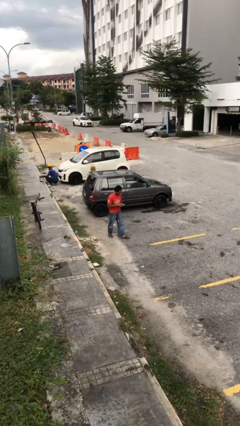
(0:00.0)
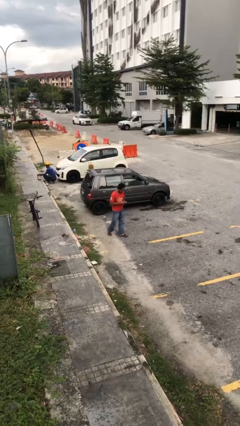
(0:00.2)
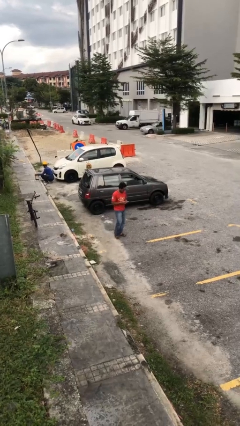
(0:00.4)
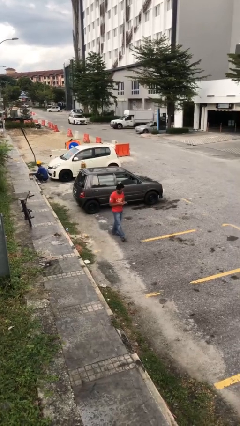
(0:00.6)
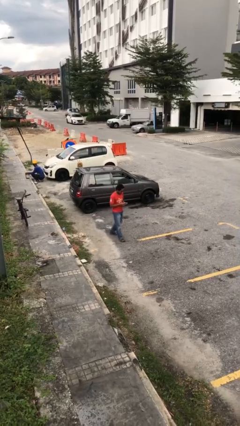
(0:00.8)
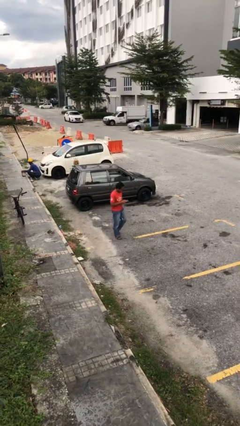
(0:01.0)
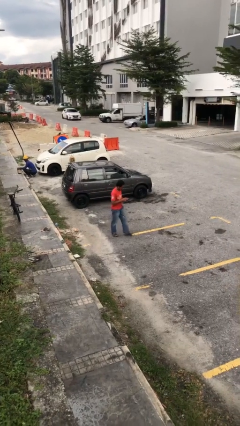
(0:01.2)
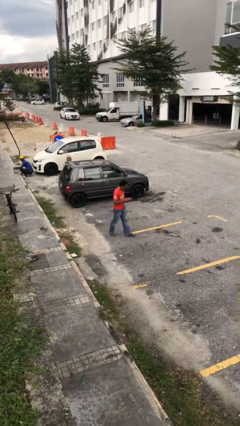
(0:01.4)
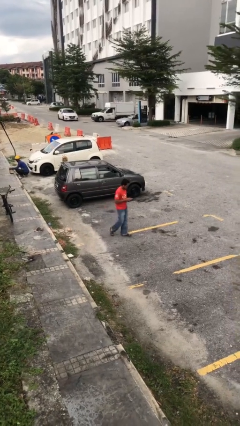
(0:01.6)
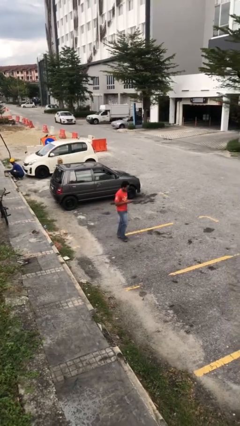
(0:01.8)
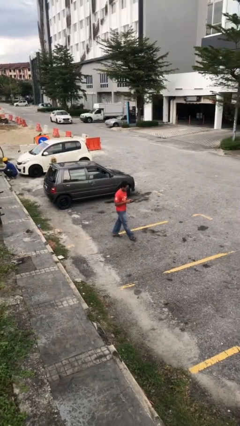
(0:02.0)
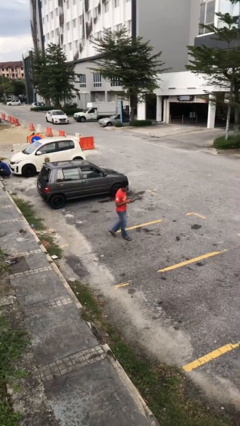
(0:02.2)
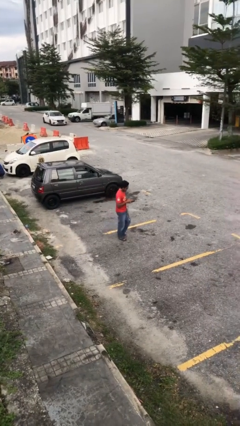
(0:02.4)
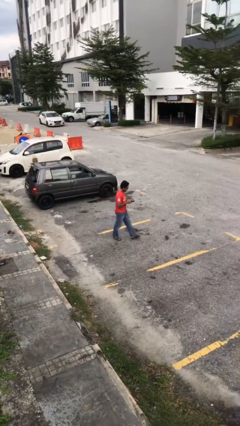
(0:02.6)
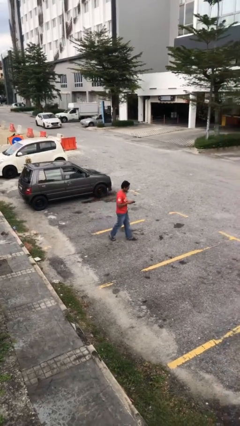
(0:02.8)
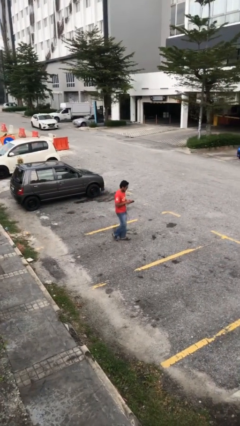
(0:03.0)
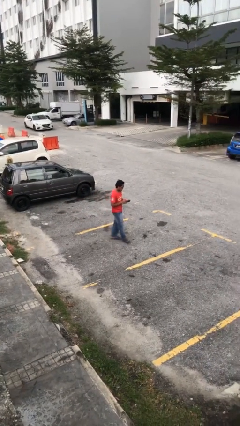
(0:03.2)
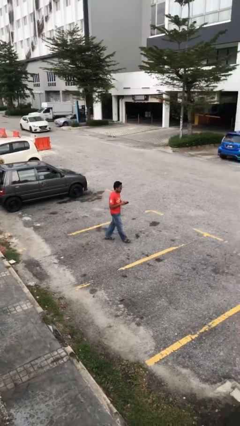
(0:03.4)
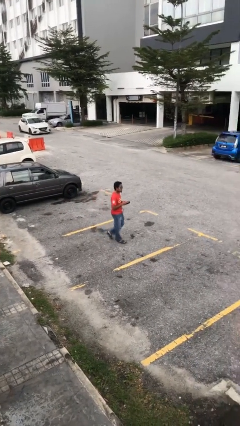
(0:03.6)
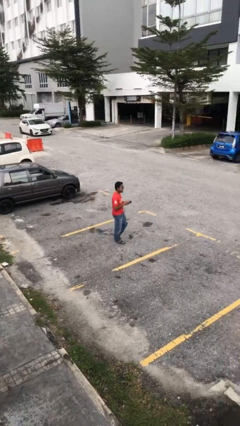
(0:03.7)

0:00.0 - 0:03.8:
person texts on phone

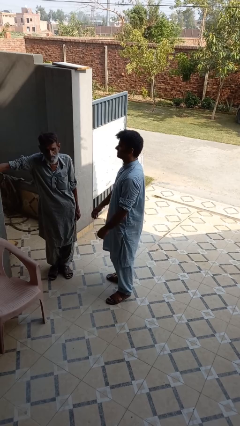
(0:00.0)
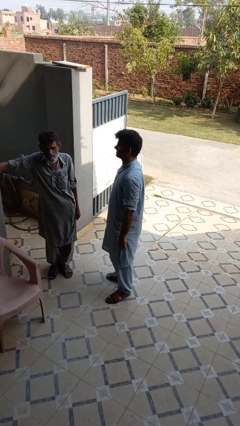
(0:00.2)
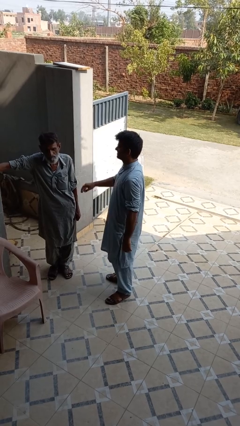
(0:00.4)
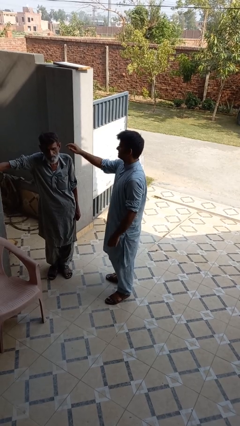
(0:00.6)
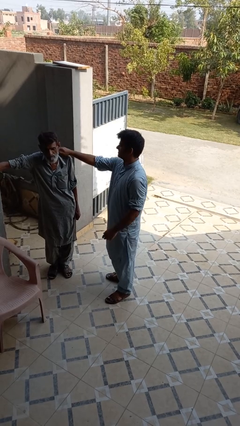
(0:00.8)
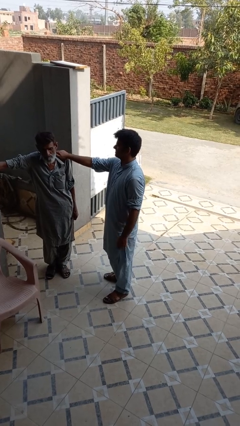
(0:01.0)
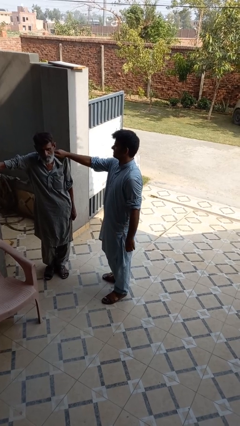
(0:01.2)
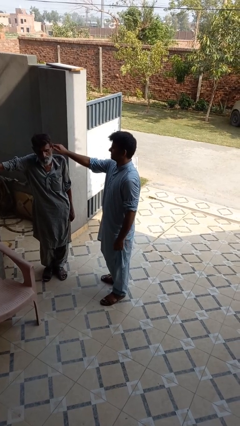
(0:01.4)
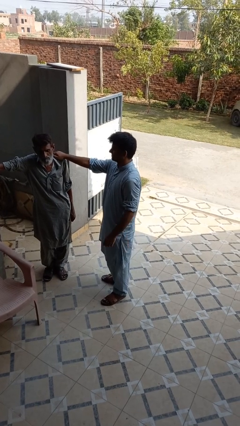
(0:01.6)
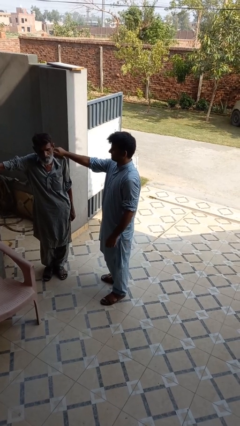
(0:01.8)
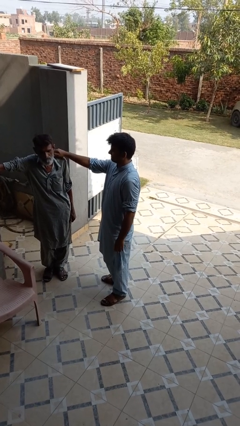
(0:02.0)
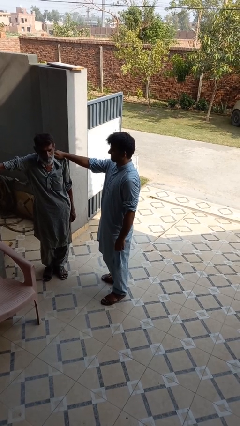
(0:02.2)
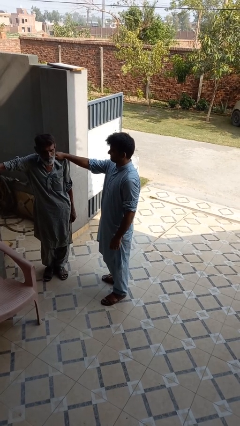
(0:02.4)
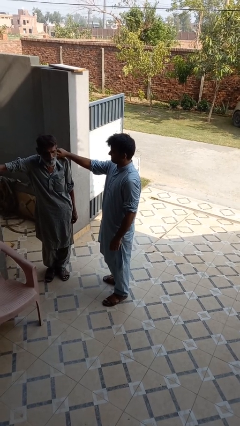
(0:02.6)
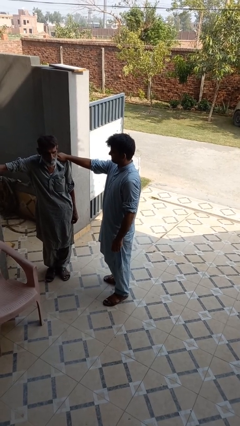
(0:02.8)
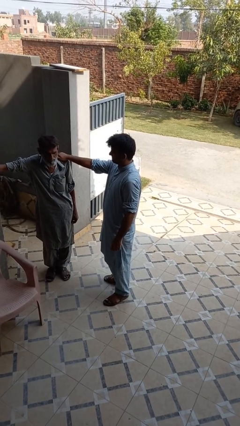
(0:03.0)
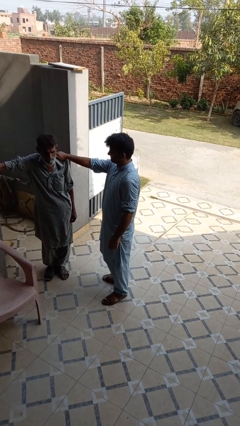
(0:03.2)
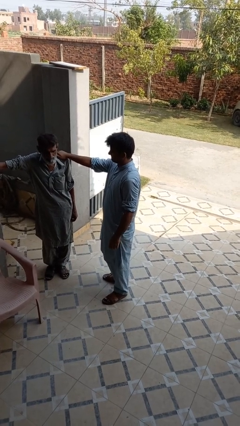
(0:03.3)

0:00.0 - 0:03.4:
person pounds shoulders of person

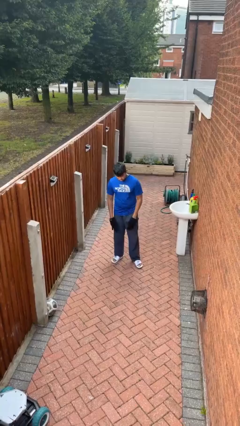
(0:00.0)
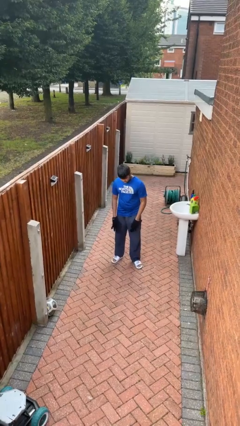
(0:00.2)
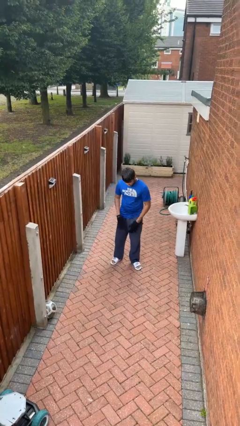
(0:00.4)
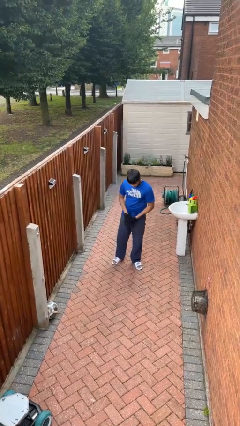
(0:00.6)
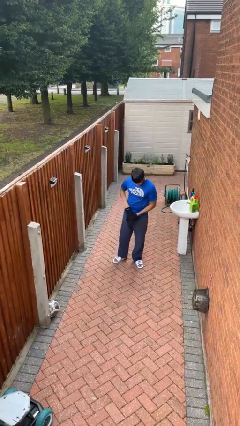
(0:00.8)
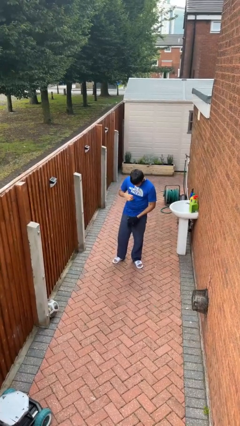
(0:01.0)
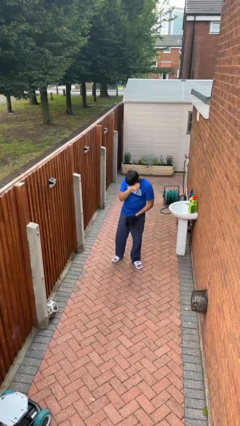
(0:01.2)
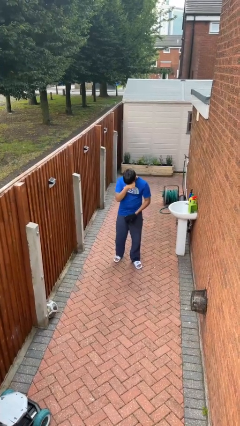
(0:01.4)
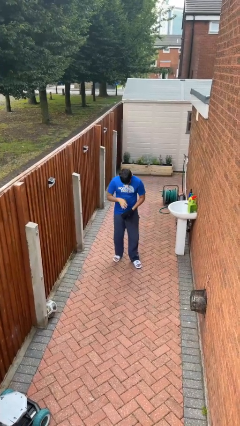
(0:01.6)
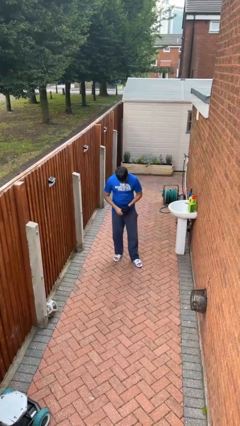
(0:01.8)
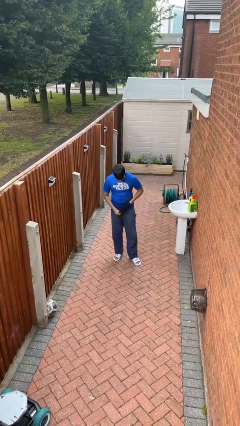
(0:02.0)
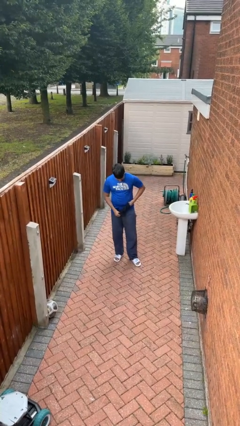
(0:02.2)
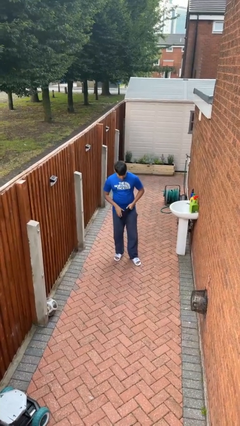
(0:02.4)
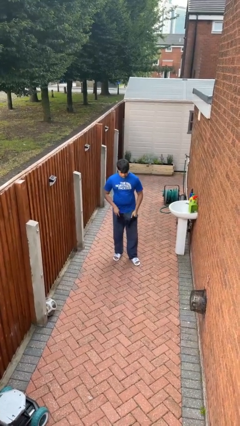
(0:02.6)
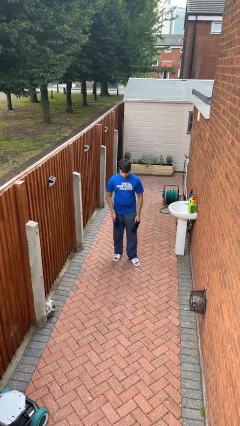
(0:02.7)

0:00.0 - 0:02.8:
person takes off gloves

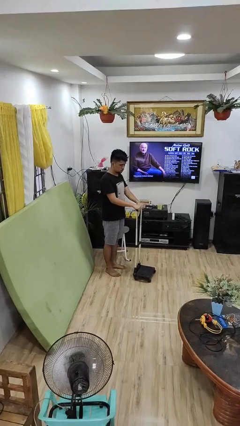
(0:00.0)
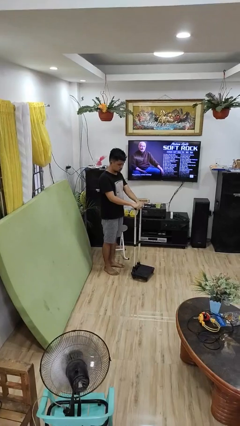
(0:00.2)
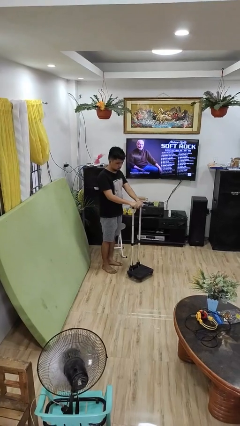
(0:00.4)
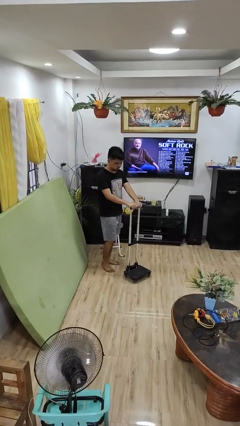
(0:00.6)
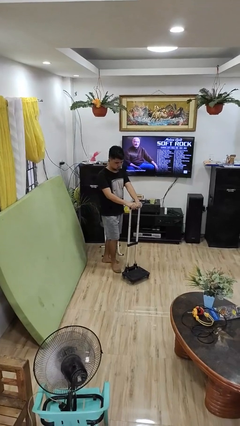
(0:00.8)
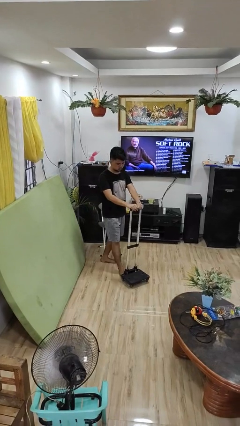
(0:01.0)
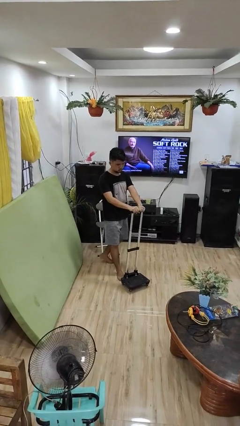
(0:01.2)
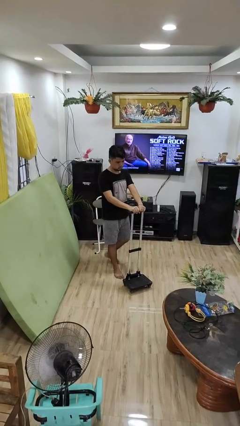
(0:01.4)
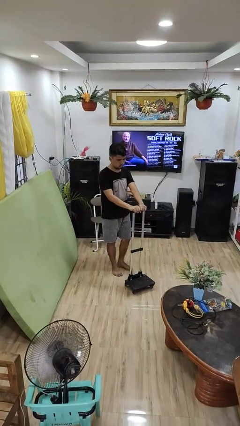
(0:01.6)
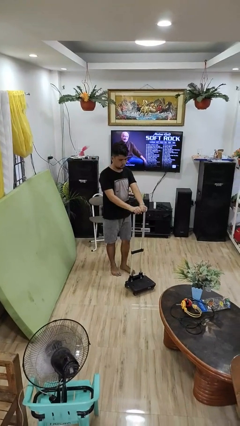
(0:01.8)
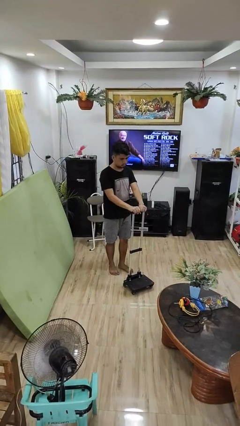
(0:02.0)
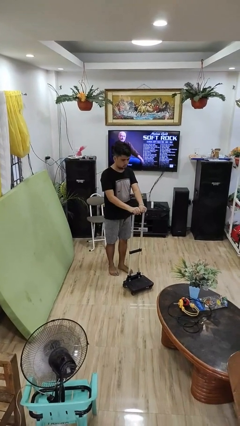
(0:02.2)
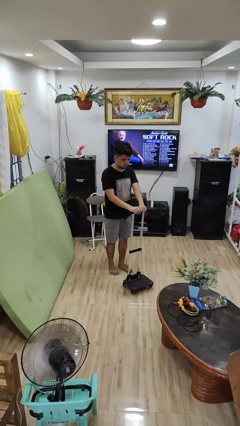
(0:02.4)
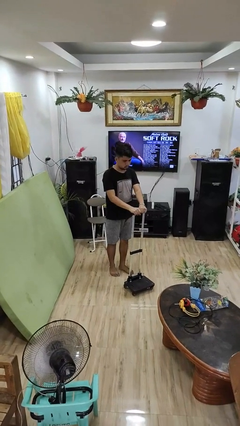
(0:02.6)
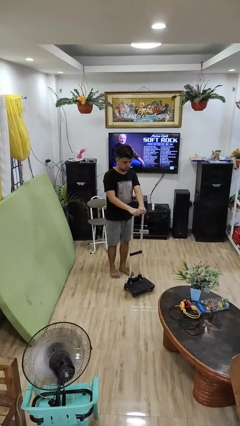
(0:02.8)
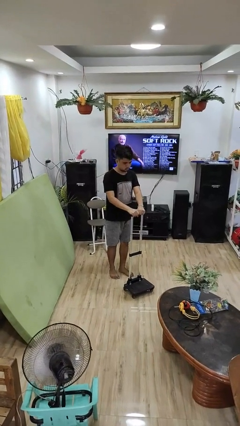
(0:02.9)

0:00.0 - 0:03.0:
person pushes wheeled cart

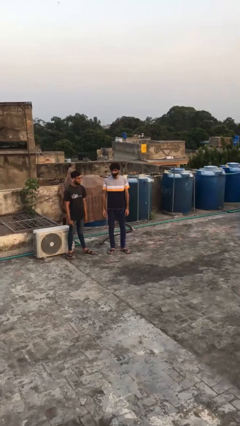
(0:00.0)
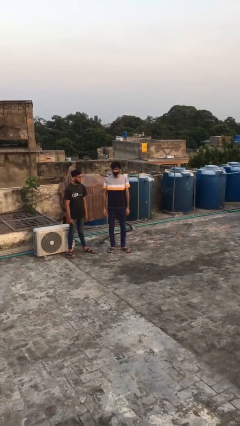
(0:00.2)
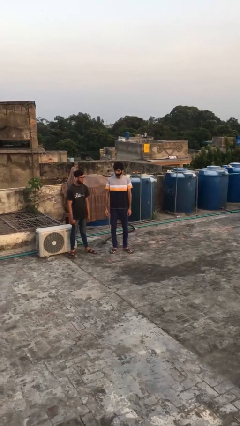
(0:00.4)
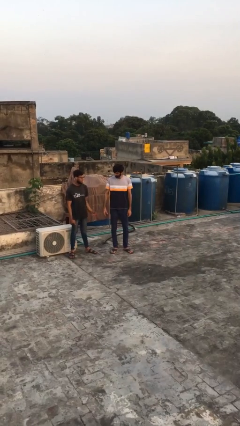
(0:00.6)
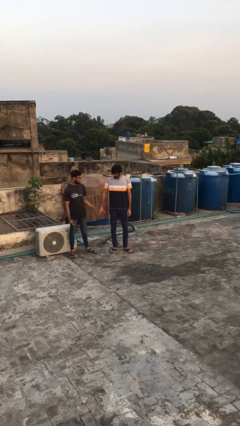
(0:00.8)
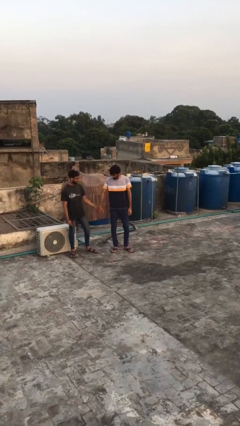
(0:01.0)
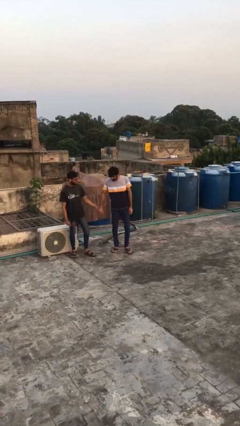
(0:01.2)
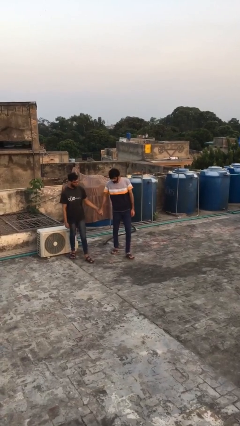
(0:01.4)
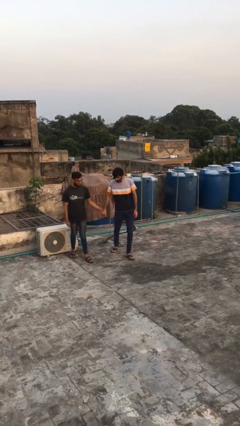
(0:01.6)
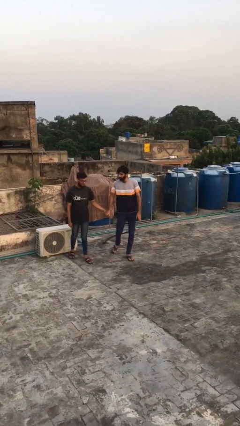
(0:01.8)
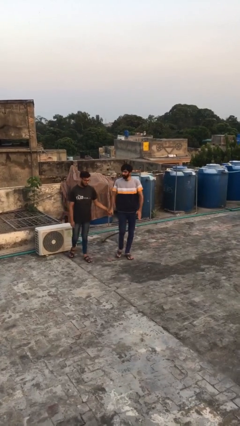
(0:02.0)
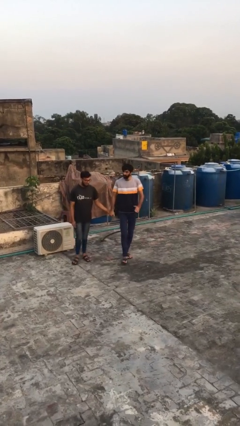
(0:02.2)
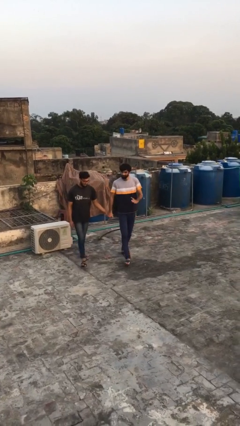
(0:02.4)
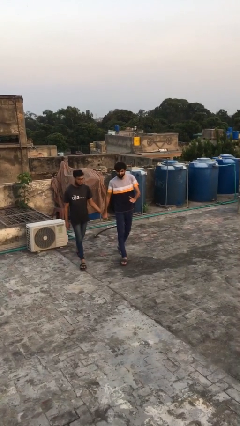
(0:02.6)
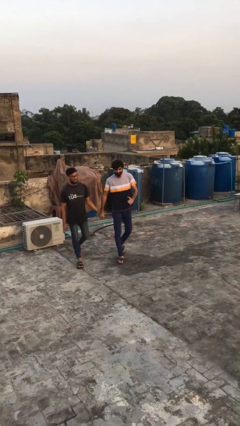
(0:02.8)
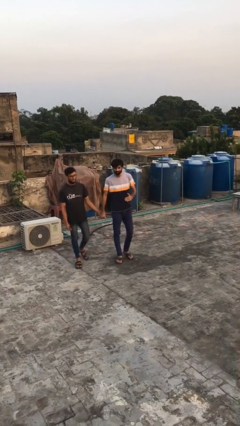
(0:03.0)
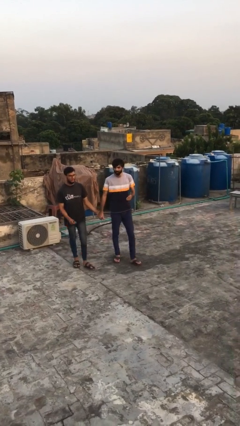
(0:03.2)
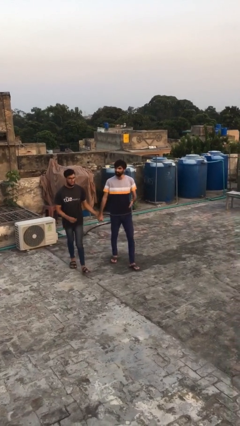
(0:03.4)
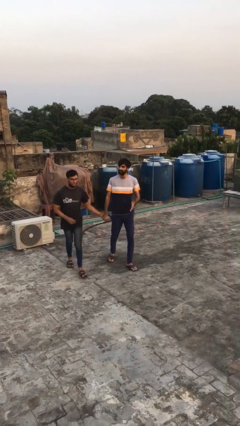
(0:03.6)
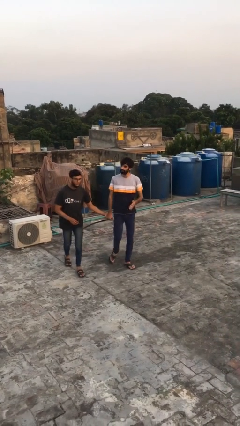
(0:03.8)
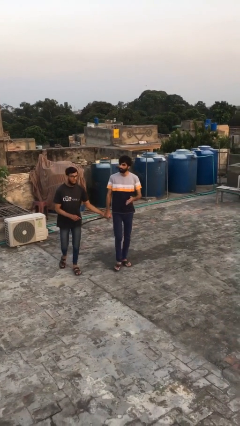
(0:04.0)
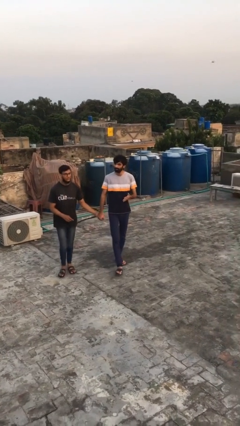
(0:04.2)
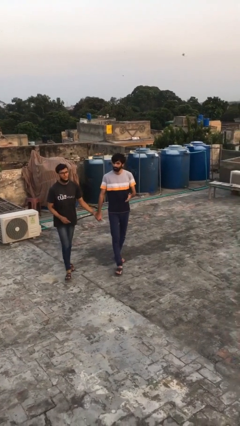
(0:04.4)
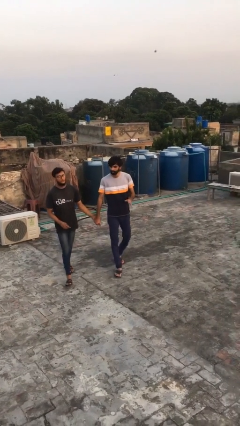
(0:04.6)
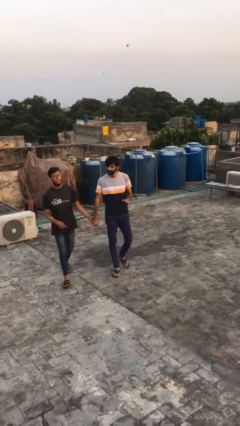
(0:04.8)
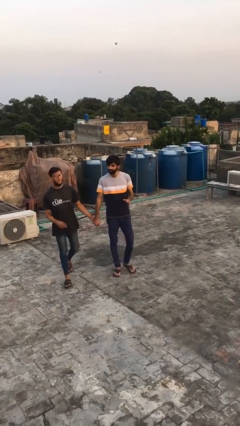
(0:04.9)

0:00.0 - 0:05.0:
person holds hand
